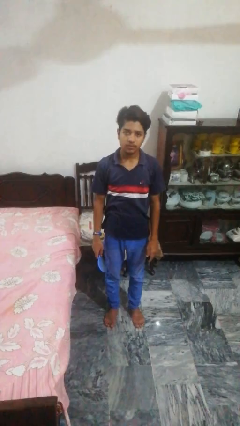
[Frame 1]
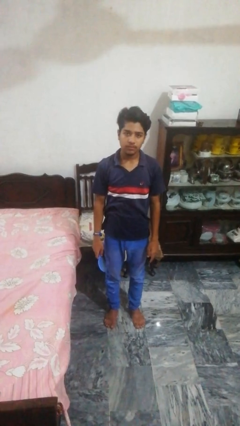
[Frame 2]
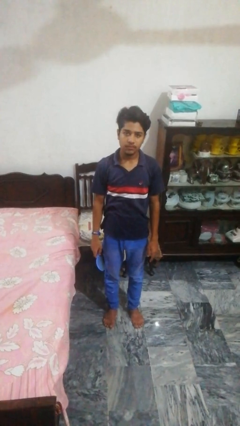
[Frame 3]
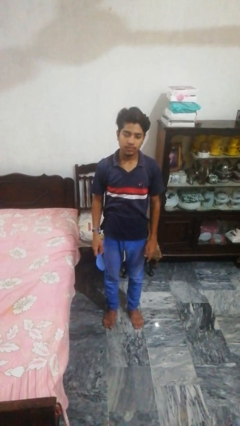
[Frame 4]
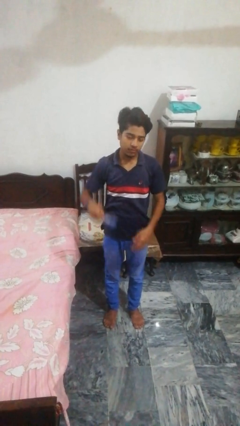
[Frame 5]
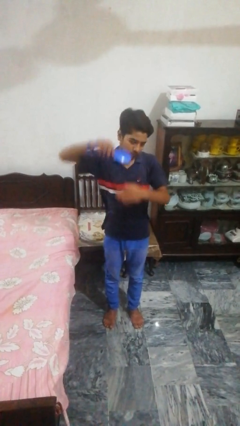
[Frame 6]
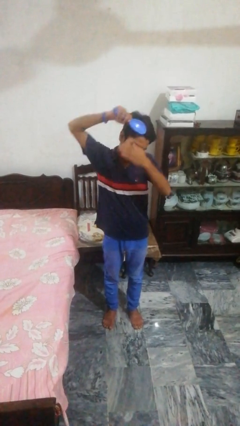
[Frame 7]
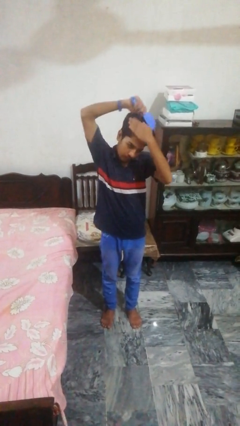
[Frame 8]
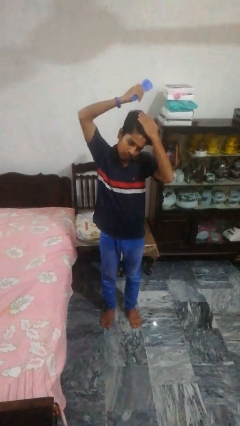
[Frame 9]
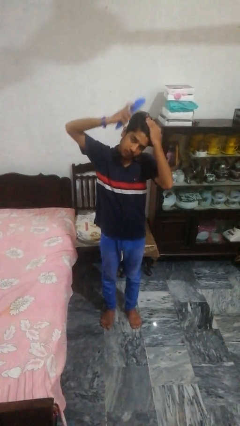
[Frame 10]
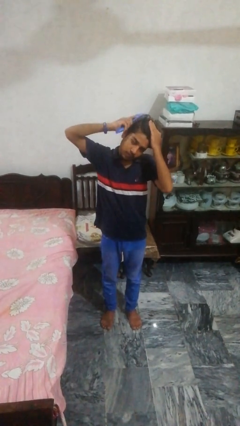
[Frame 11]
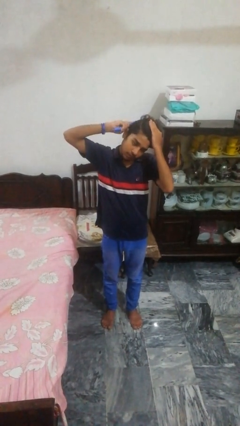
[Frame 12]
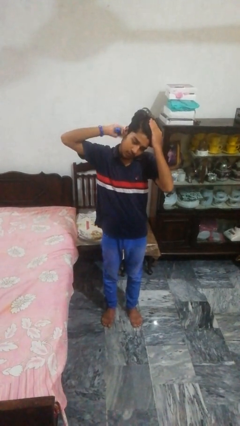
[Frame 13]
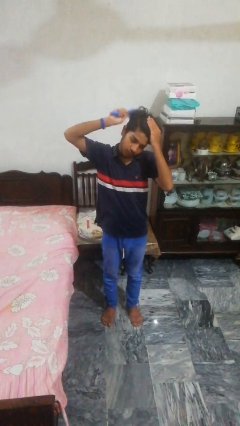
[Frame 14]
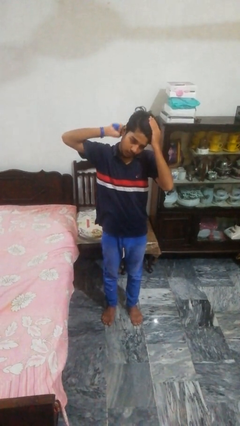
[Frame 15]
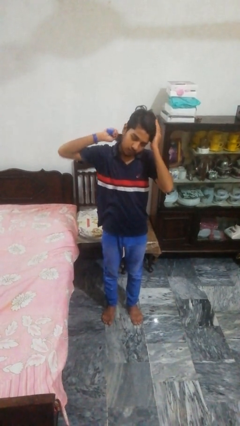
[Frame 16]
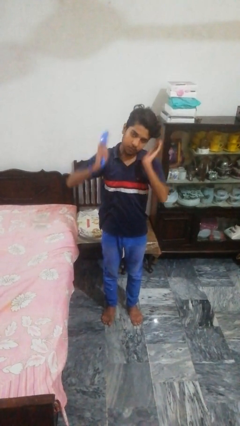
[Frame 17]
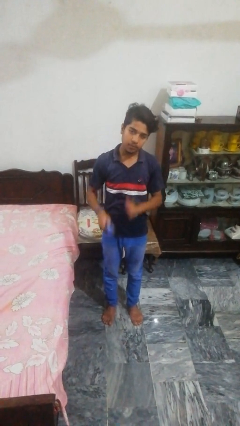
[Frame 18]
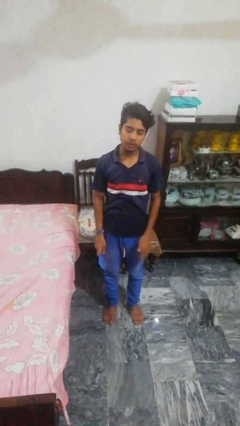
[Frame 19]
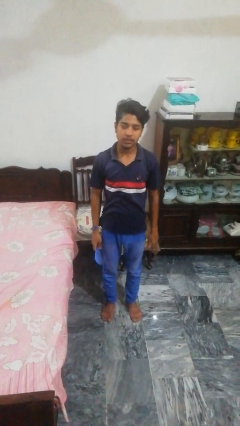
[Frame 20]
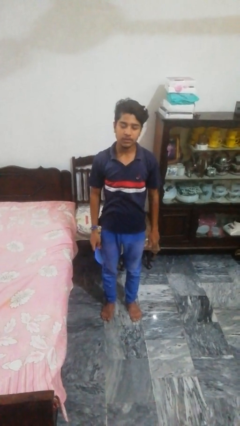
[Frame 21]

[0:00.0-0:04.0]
person brushes hair

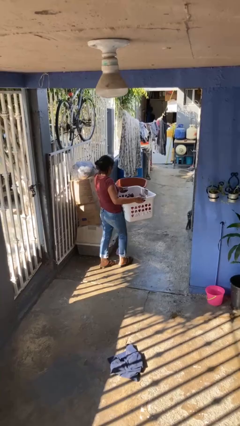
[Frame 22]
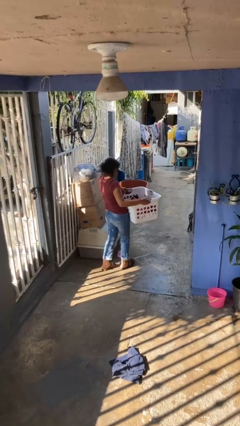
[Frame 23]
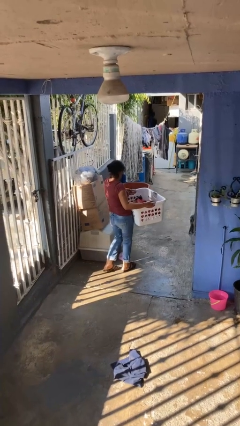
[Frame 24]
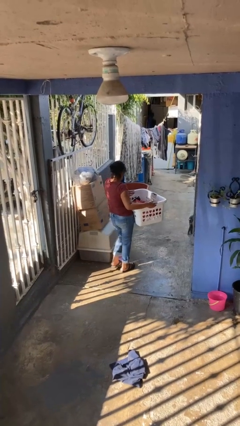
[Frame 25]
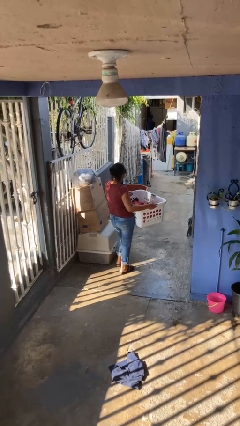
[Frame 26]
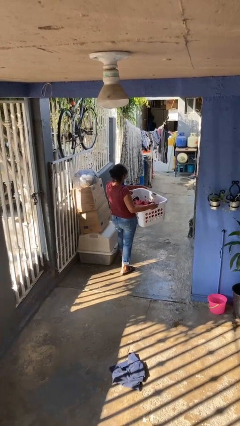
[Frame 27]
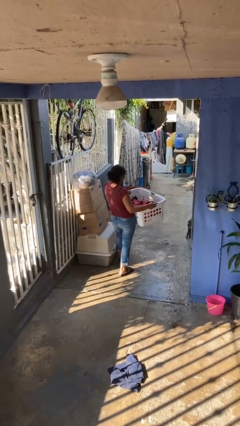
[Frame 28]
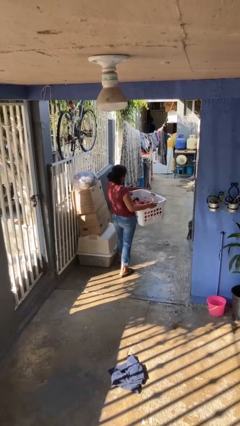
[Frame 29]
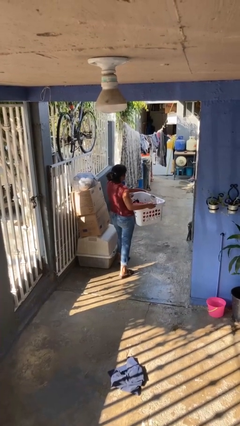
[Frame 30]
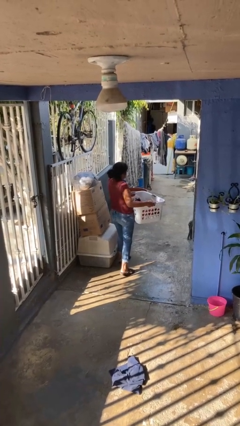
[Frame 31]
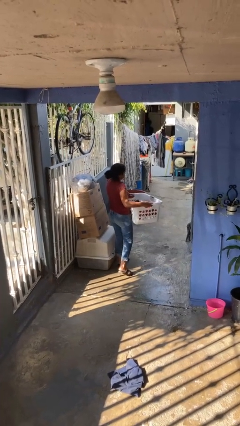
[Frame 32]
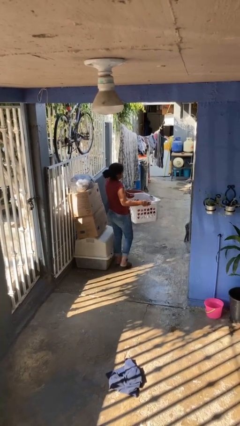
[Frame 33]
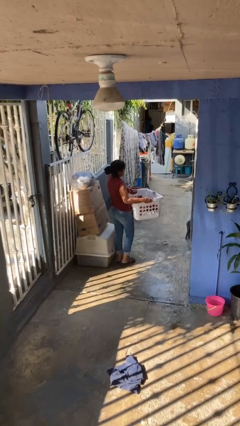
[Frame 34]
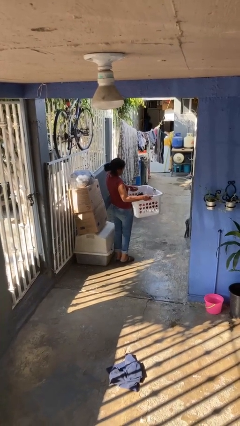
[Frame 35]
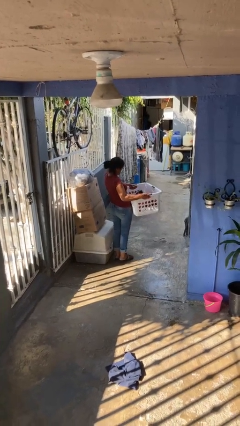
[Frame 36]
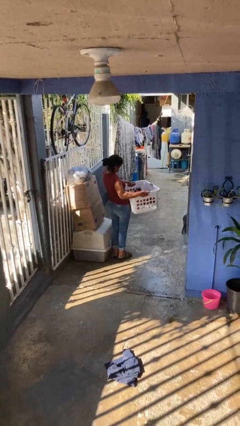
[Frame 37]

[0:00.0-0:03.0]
person carries laundry basket

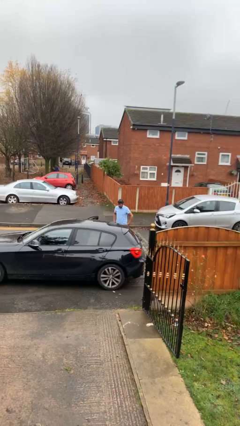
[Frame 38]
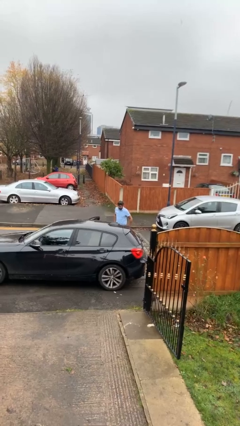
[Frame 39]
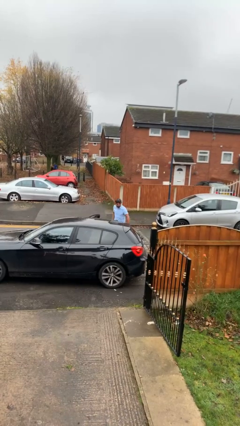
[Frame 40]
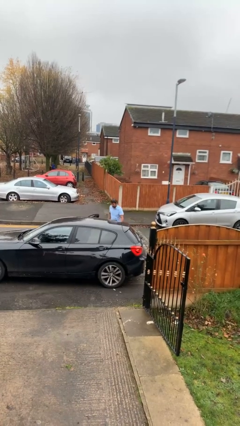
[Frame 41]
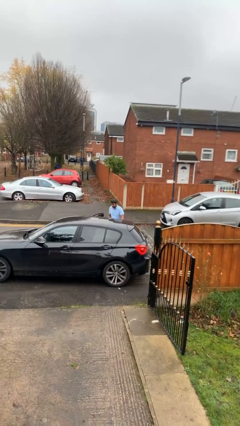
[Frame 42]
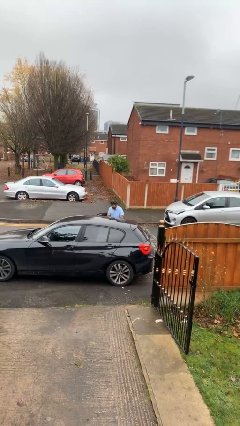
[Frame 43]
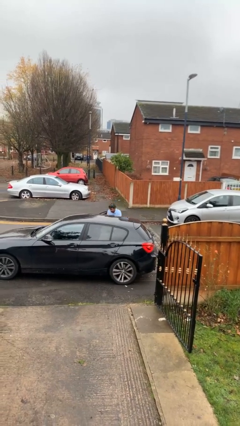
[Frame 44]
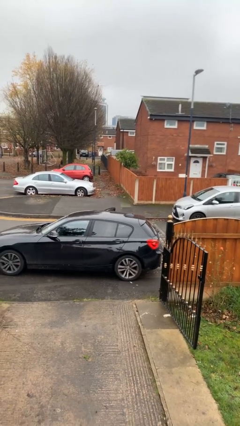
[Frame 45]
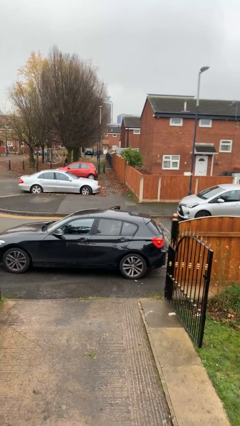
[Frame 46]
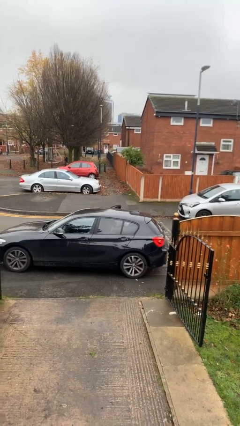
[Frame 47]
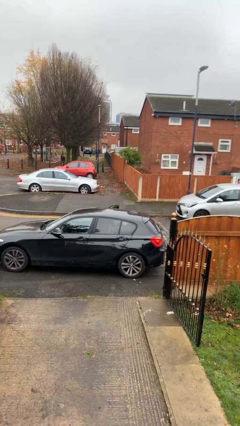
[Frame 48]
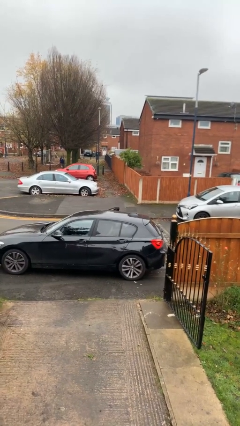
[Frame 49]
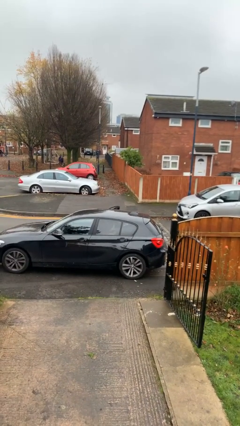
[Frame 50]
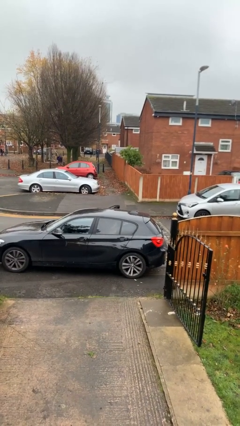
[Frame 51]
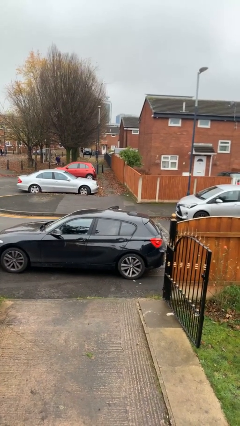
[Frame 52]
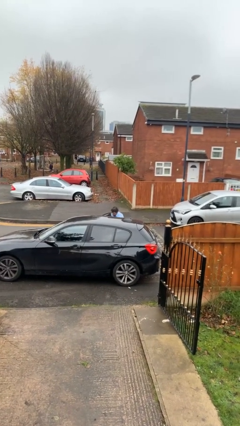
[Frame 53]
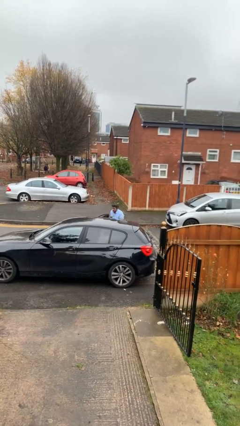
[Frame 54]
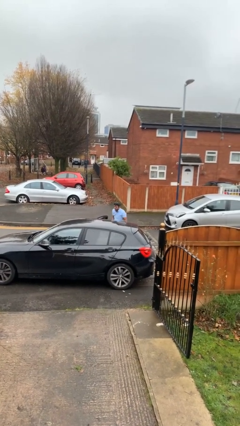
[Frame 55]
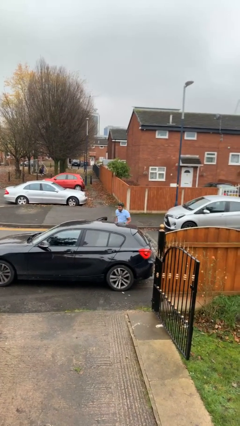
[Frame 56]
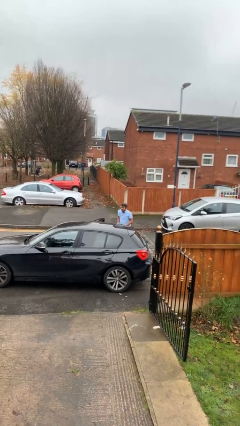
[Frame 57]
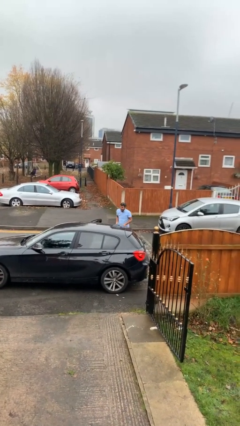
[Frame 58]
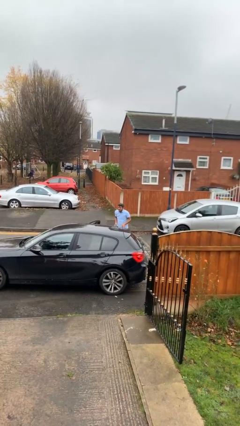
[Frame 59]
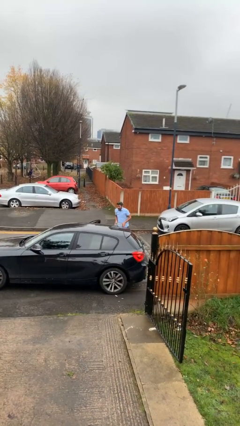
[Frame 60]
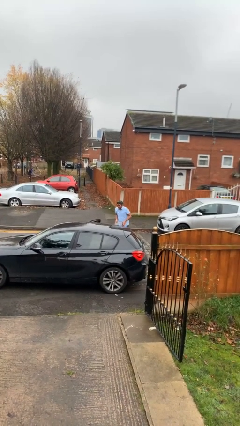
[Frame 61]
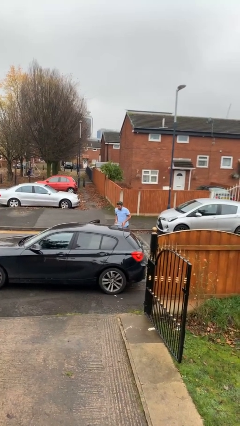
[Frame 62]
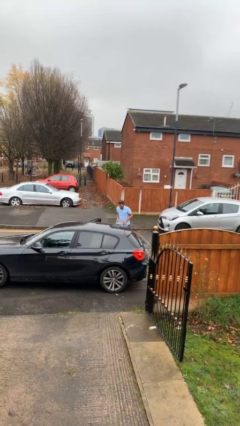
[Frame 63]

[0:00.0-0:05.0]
person unloads car

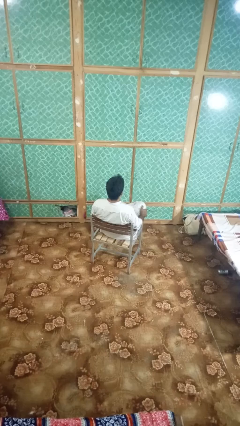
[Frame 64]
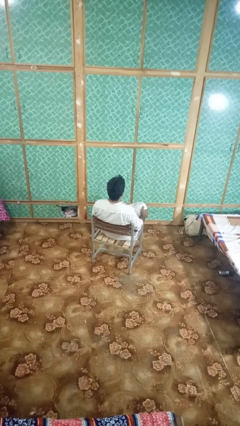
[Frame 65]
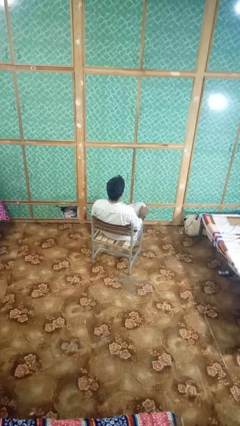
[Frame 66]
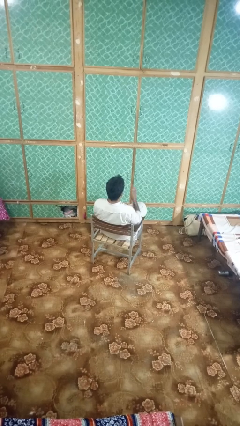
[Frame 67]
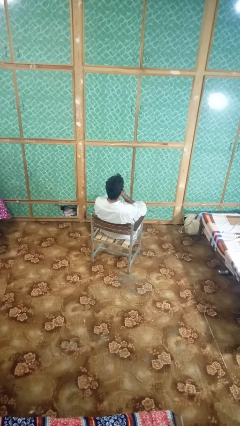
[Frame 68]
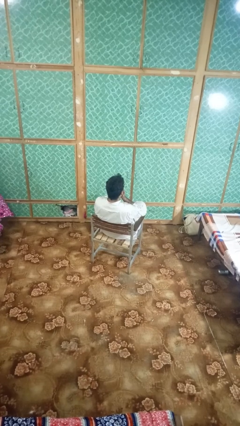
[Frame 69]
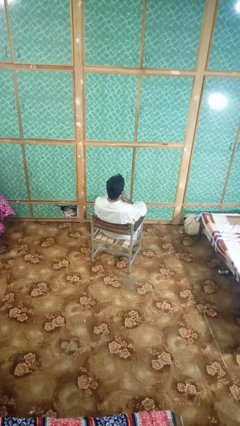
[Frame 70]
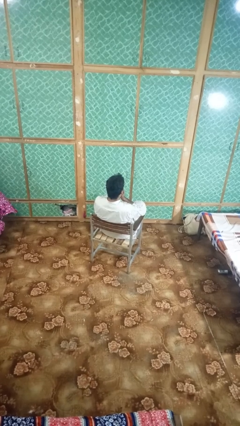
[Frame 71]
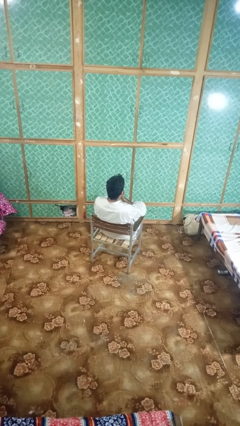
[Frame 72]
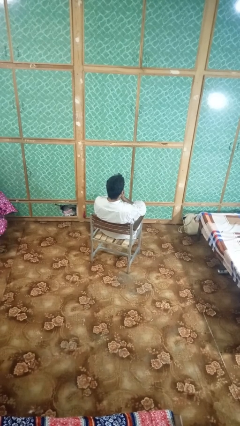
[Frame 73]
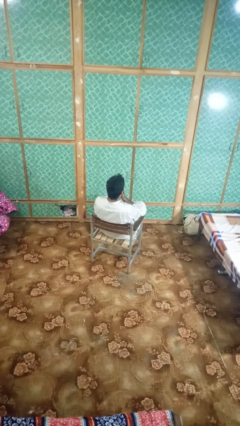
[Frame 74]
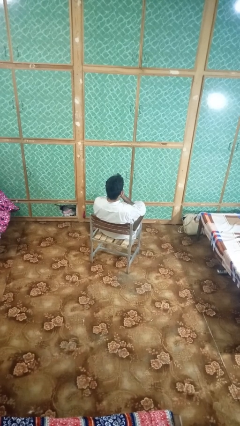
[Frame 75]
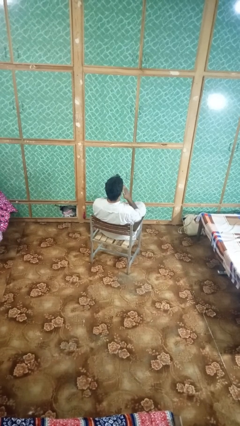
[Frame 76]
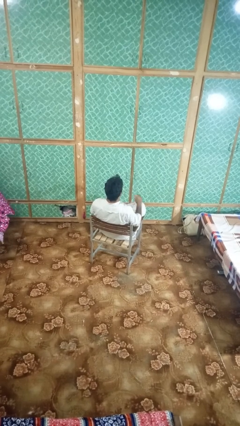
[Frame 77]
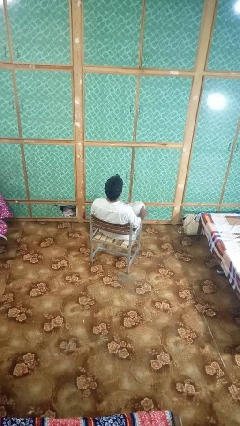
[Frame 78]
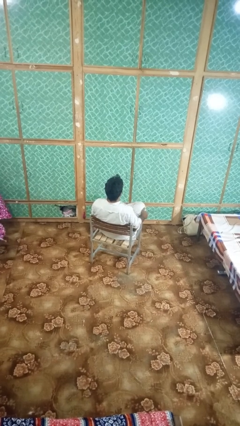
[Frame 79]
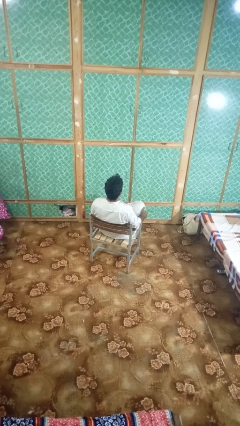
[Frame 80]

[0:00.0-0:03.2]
person sneezes into hand

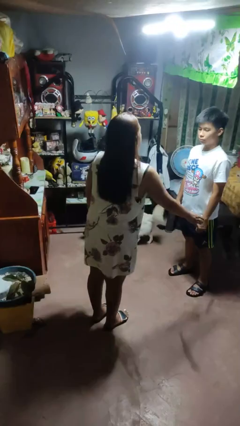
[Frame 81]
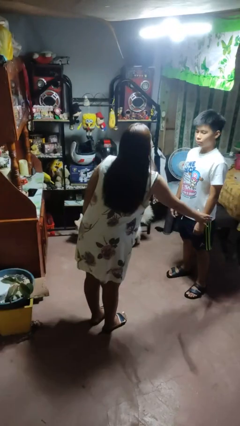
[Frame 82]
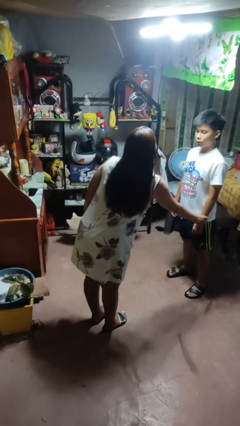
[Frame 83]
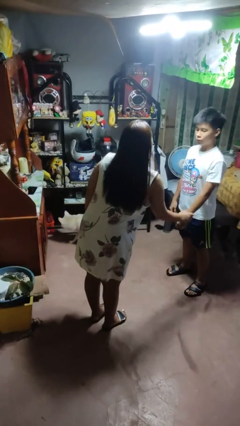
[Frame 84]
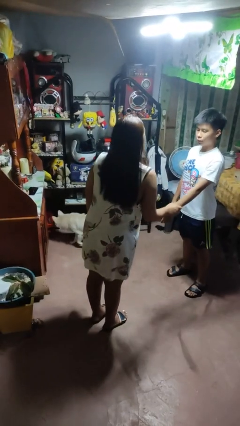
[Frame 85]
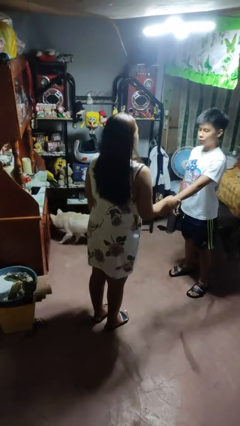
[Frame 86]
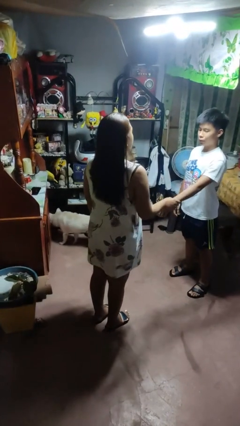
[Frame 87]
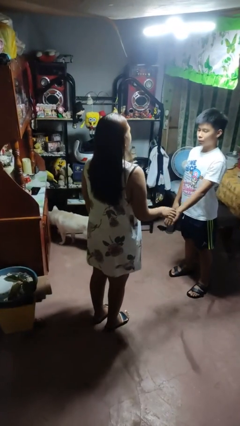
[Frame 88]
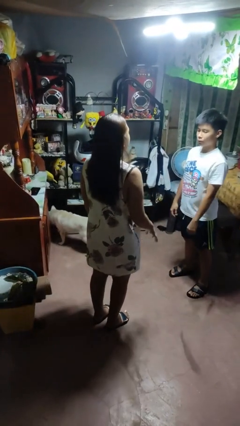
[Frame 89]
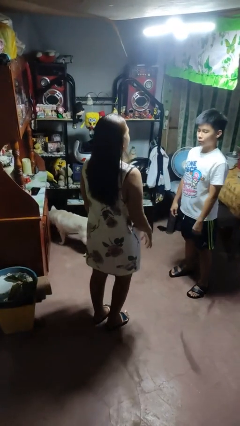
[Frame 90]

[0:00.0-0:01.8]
person grabs person by forearm
